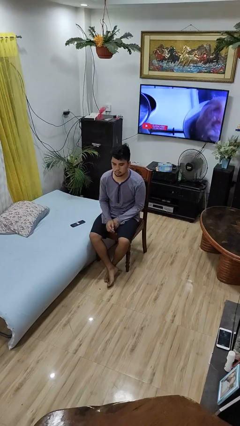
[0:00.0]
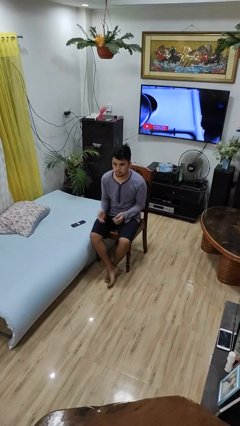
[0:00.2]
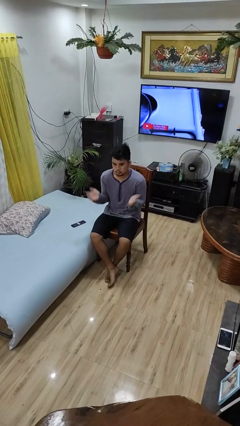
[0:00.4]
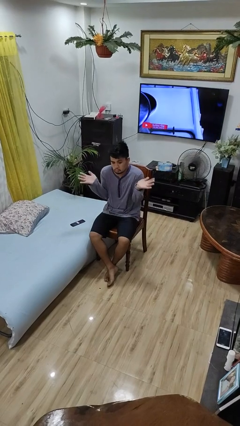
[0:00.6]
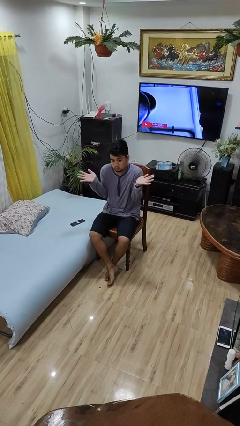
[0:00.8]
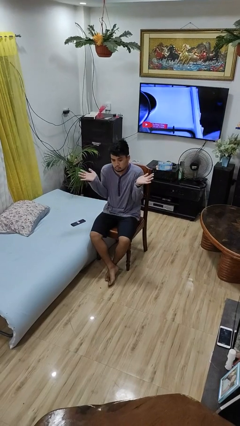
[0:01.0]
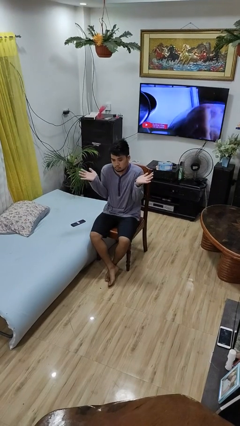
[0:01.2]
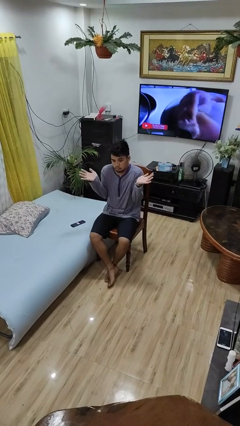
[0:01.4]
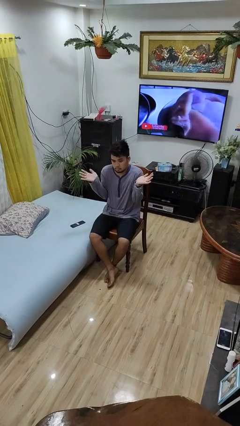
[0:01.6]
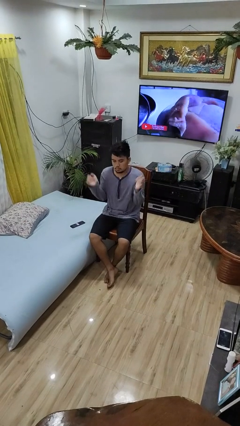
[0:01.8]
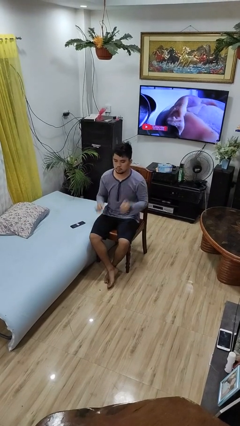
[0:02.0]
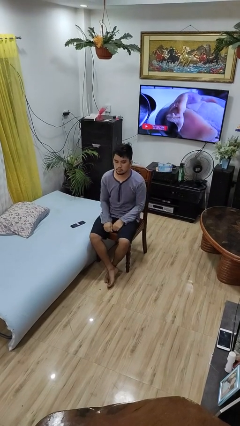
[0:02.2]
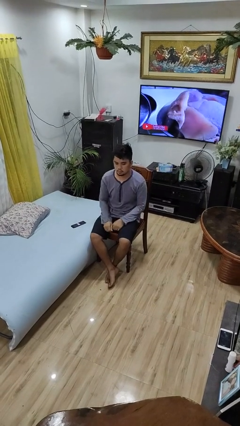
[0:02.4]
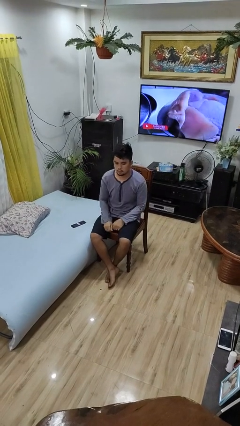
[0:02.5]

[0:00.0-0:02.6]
person shrugs

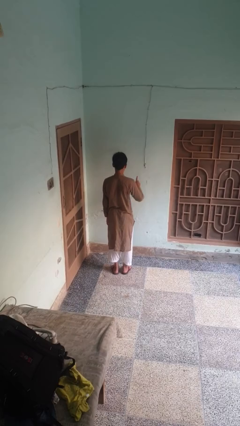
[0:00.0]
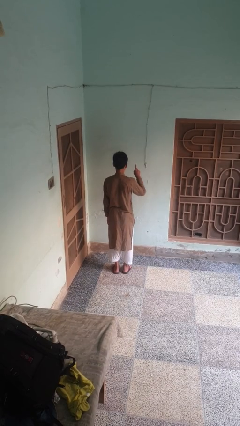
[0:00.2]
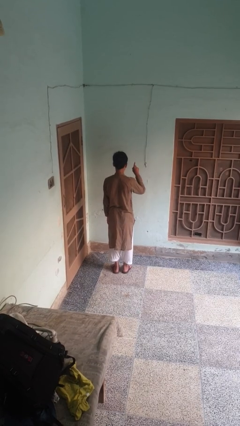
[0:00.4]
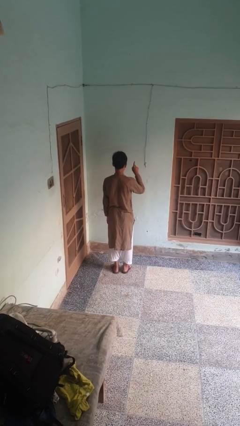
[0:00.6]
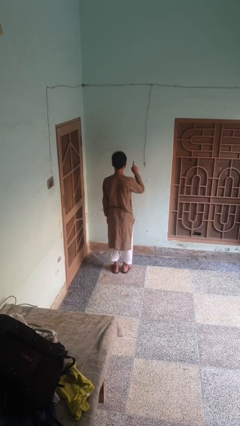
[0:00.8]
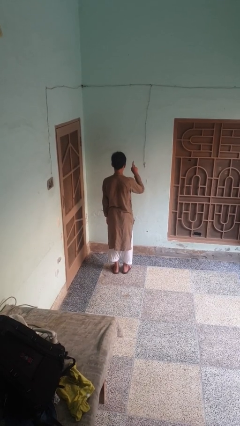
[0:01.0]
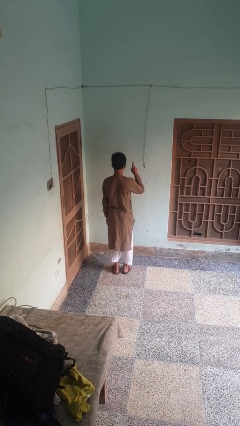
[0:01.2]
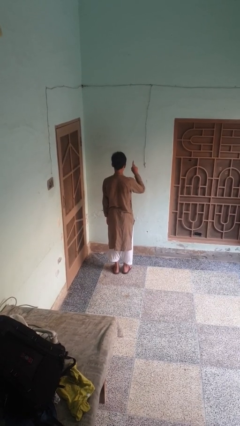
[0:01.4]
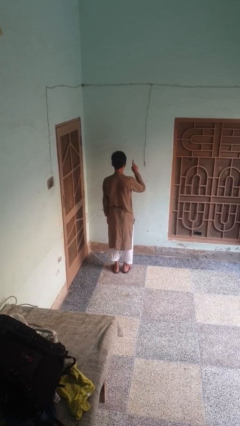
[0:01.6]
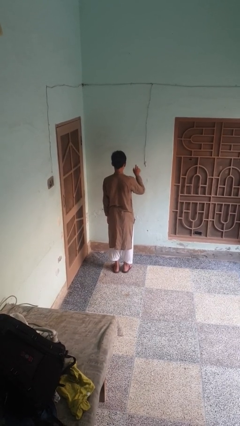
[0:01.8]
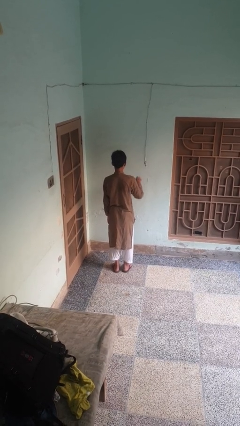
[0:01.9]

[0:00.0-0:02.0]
person gestures number one

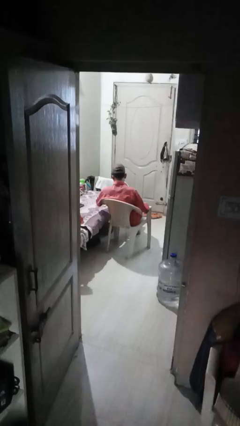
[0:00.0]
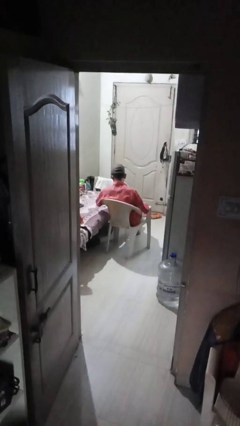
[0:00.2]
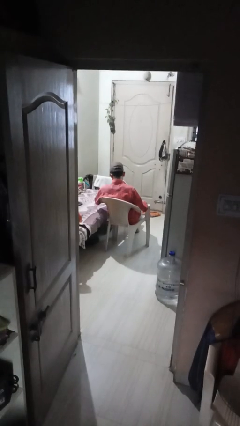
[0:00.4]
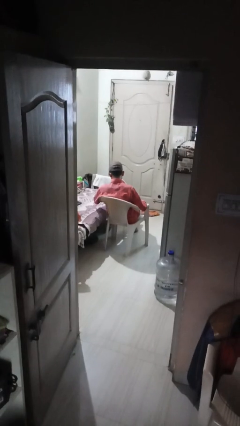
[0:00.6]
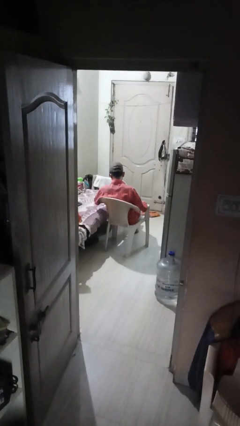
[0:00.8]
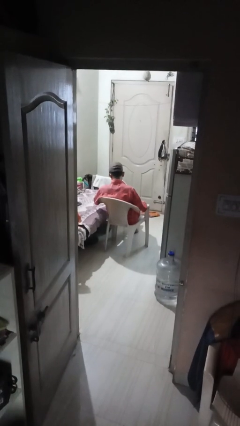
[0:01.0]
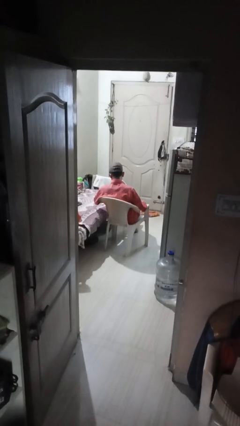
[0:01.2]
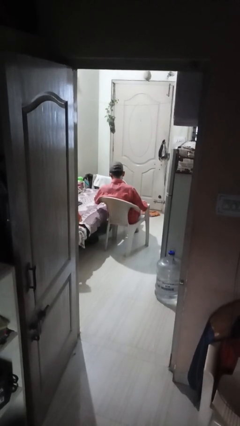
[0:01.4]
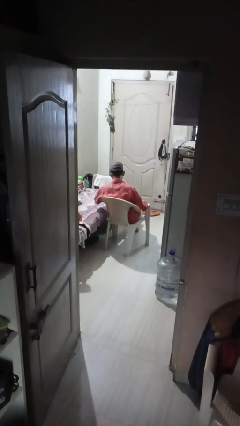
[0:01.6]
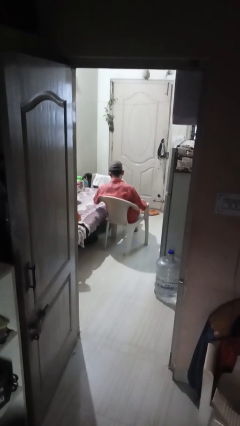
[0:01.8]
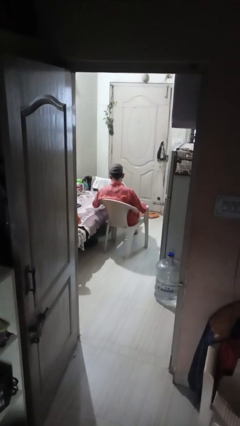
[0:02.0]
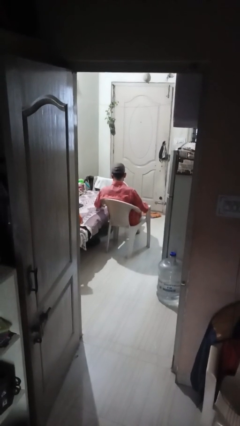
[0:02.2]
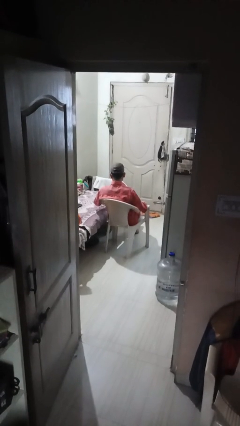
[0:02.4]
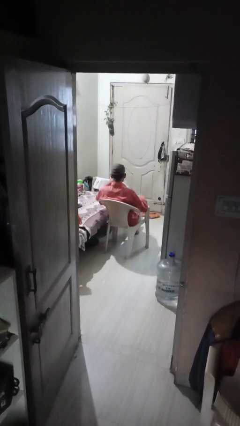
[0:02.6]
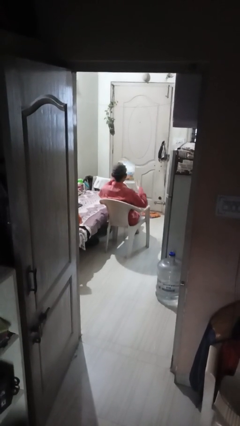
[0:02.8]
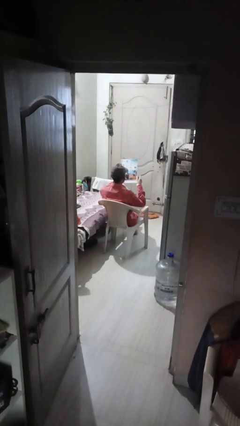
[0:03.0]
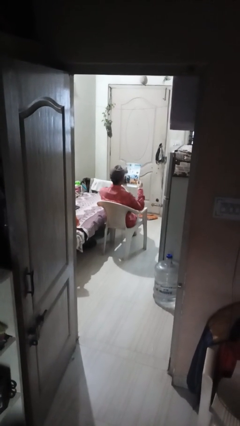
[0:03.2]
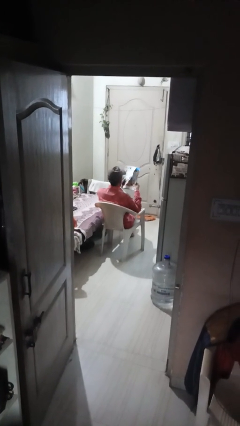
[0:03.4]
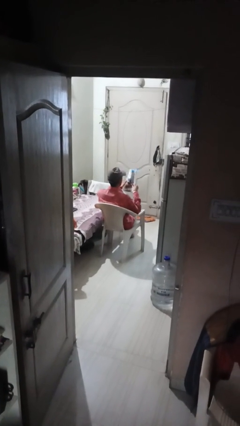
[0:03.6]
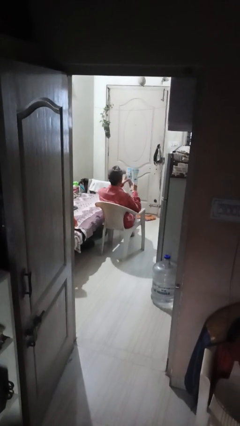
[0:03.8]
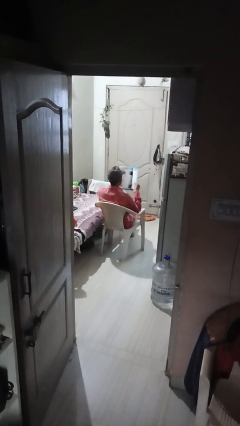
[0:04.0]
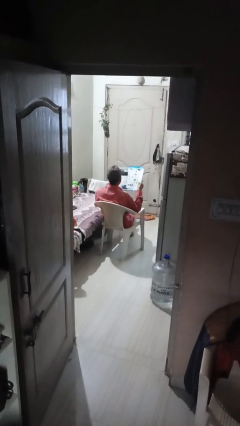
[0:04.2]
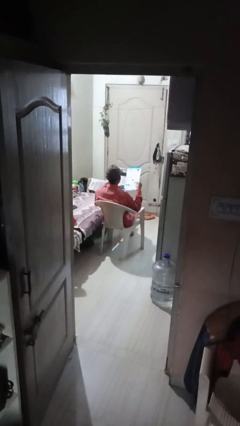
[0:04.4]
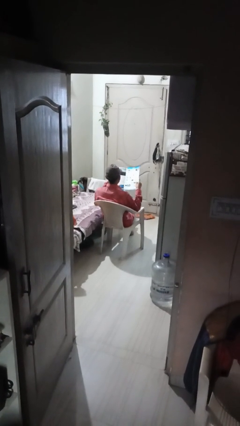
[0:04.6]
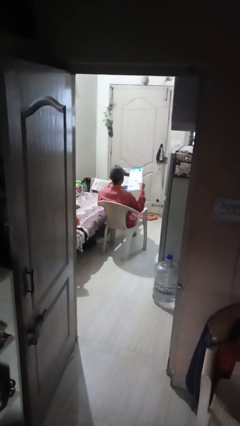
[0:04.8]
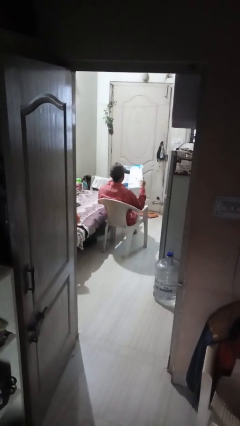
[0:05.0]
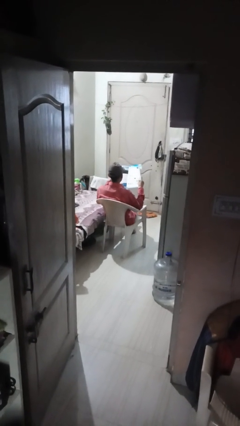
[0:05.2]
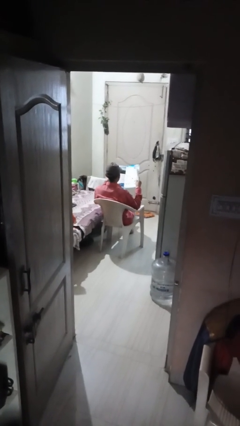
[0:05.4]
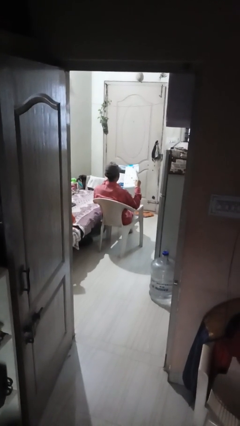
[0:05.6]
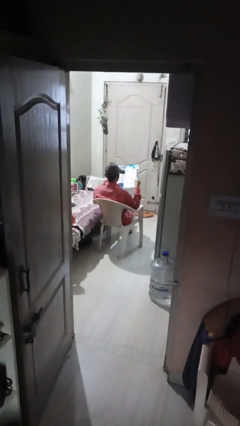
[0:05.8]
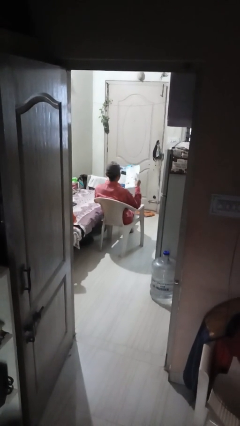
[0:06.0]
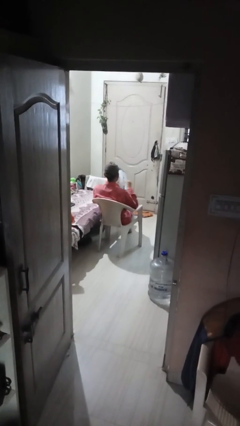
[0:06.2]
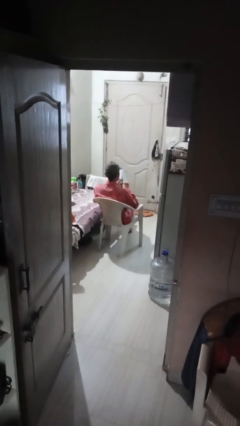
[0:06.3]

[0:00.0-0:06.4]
person reads magazine

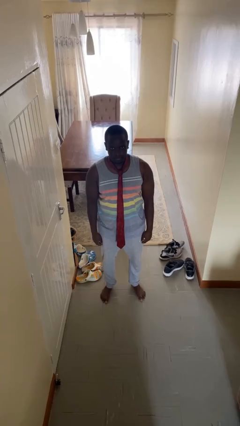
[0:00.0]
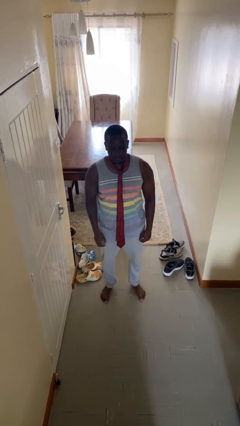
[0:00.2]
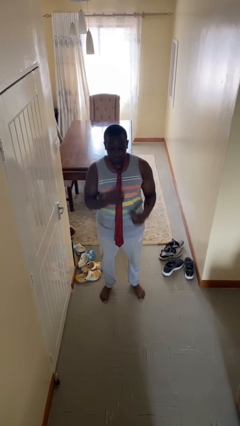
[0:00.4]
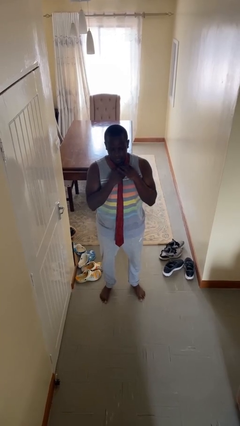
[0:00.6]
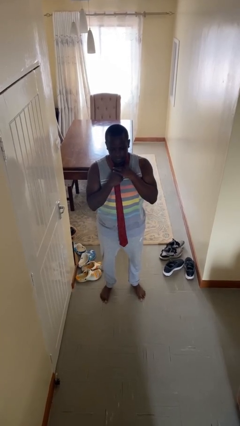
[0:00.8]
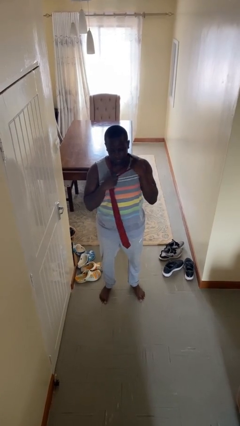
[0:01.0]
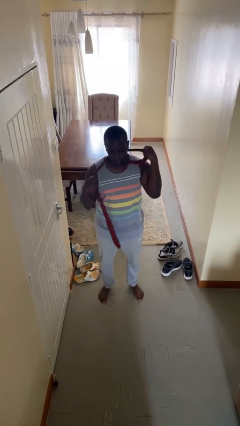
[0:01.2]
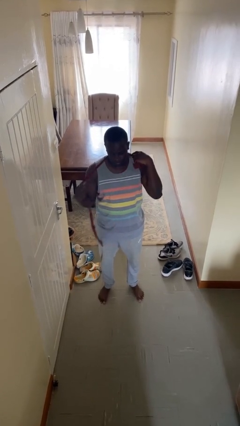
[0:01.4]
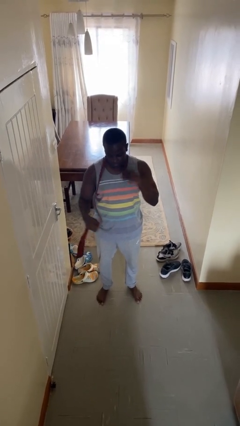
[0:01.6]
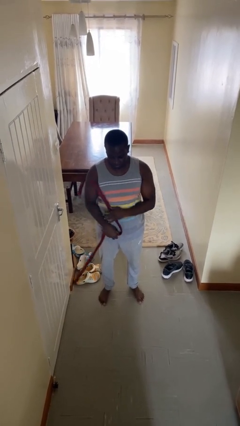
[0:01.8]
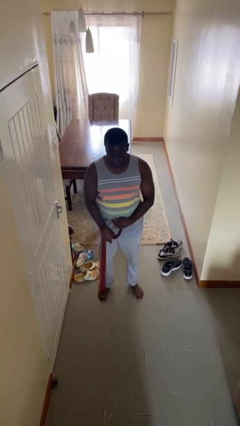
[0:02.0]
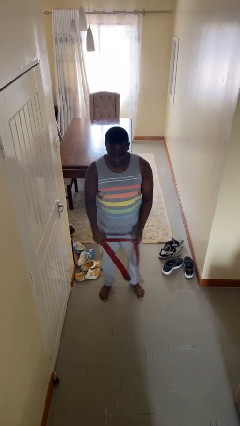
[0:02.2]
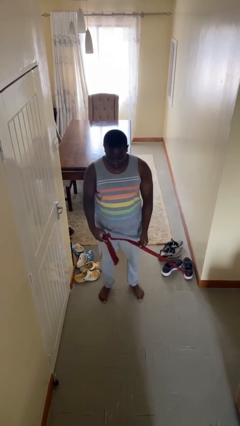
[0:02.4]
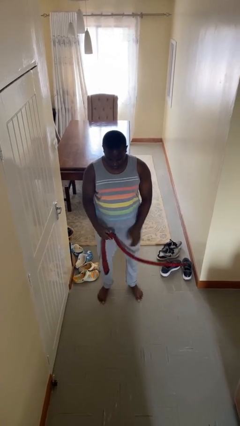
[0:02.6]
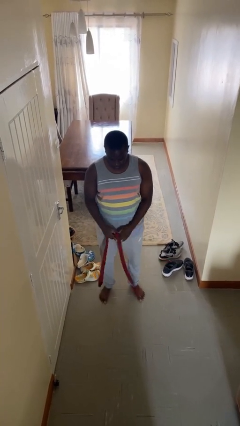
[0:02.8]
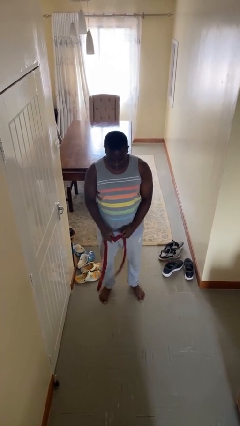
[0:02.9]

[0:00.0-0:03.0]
person takes off necktie

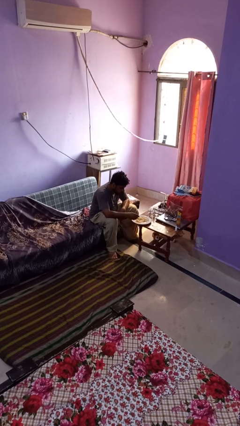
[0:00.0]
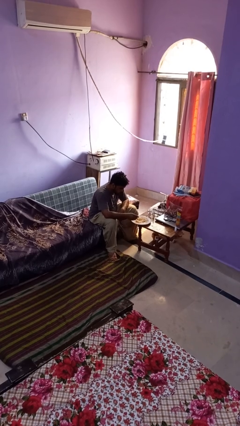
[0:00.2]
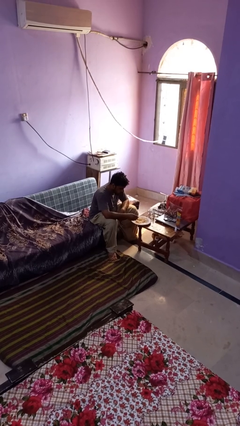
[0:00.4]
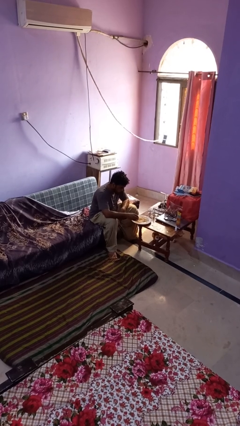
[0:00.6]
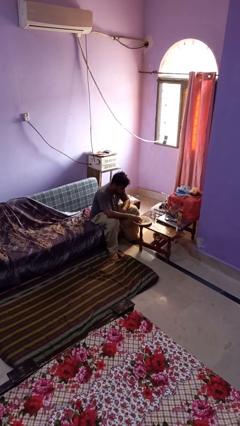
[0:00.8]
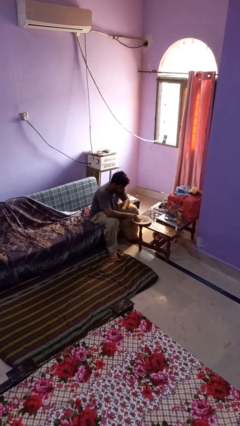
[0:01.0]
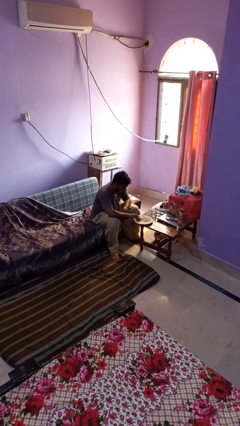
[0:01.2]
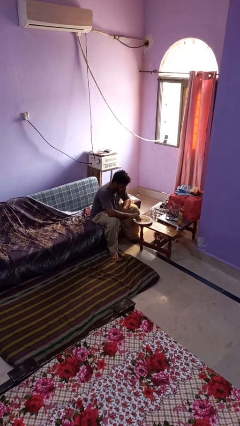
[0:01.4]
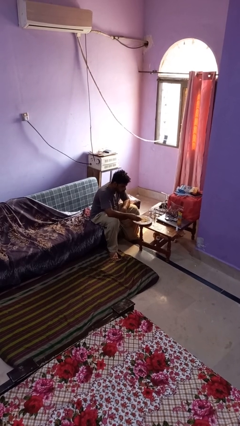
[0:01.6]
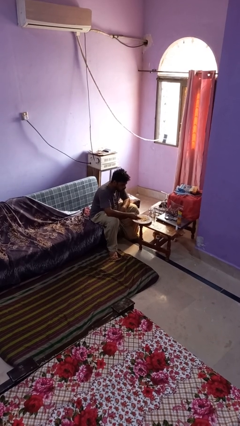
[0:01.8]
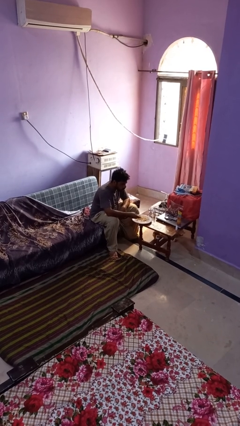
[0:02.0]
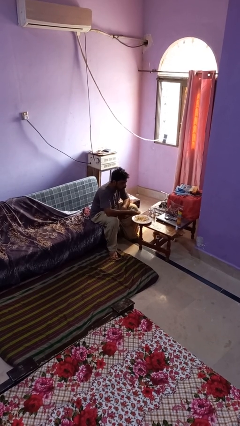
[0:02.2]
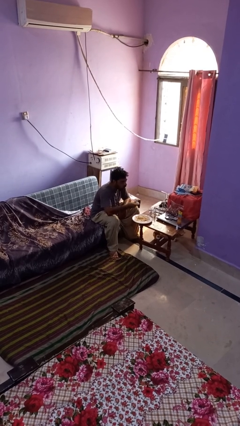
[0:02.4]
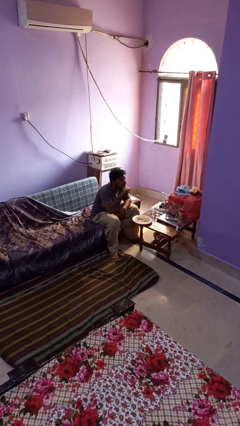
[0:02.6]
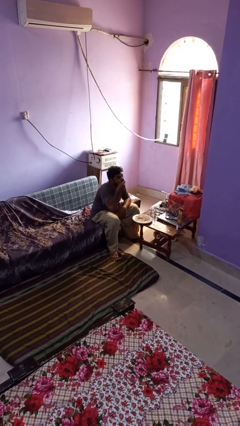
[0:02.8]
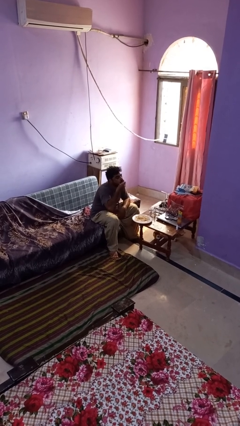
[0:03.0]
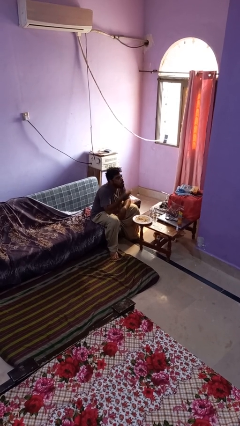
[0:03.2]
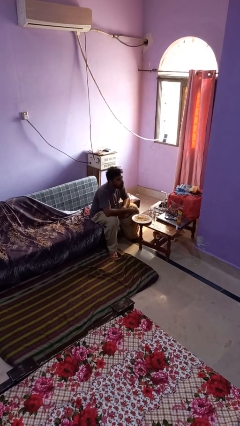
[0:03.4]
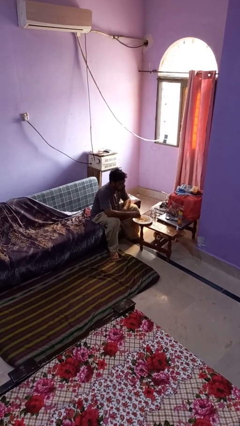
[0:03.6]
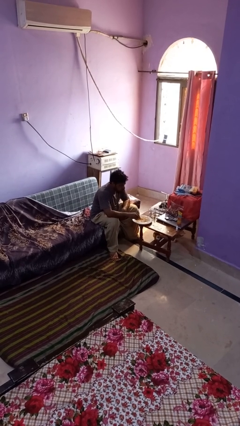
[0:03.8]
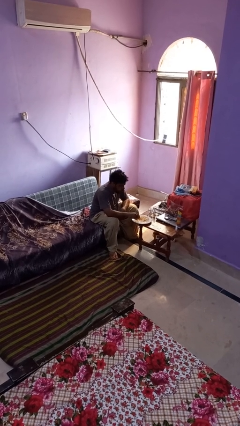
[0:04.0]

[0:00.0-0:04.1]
person eats with hands
